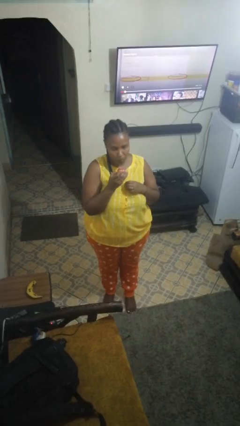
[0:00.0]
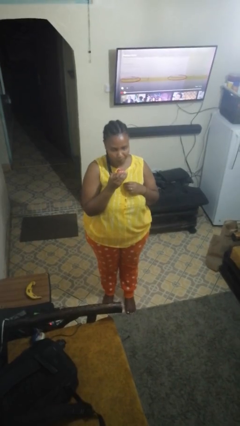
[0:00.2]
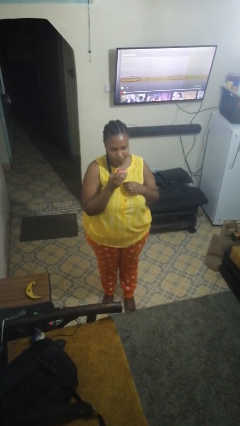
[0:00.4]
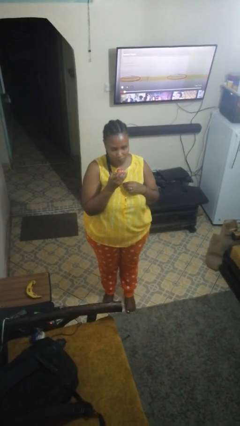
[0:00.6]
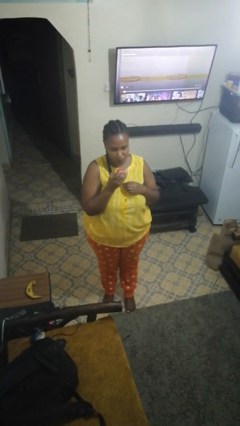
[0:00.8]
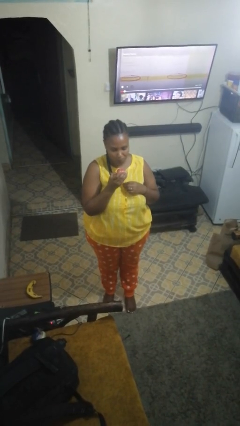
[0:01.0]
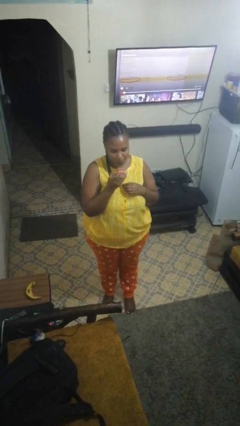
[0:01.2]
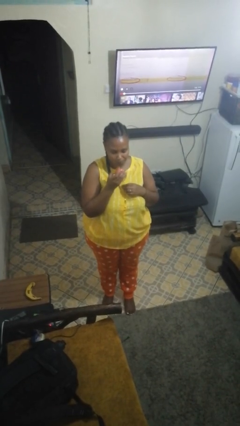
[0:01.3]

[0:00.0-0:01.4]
person eats apple

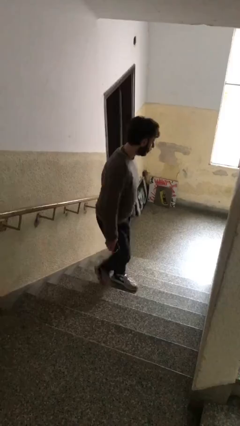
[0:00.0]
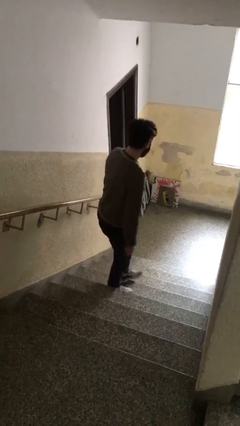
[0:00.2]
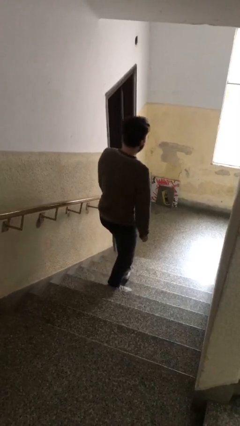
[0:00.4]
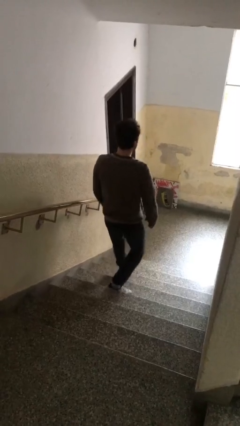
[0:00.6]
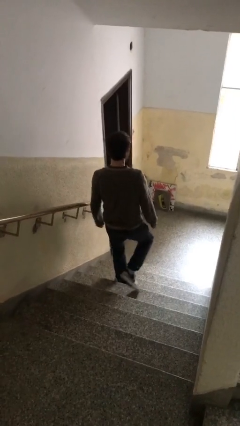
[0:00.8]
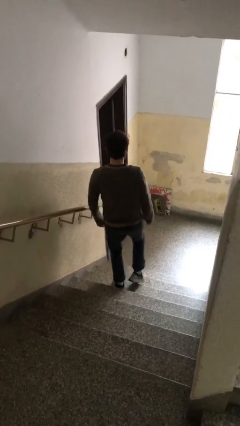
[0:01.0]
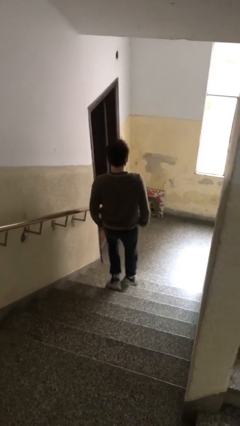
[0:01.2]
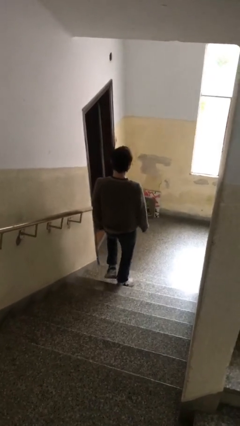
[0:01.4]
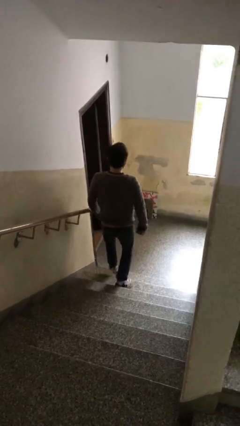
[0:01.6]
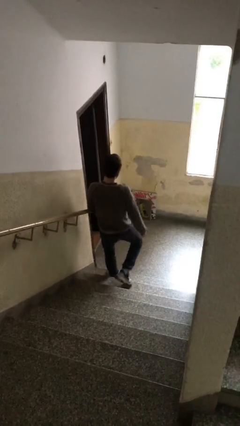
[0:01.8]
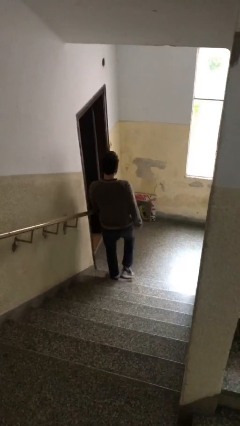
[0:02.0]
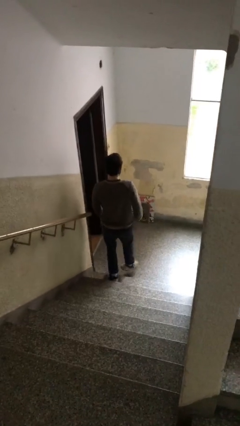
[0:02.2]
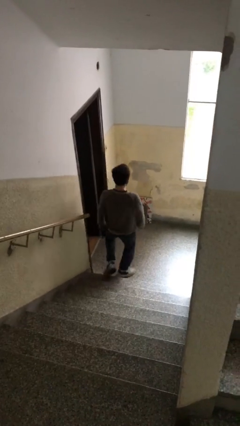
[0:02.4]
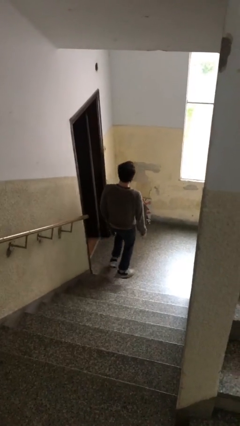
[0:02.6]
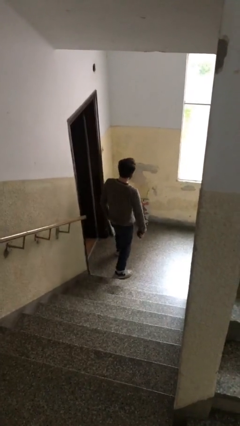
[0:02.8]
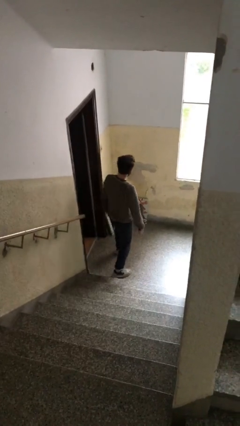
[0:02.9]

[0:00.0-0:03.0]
person climbs down stairs

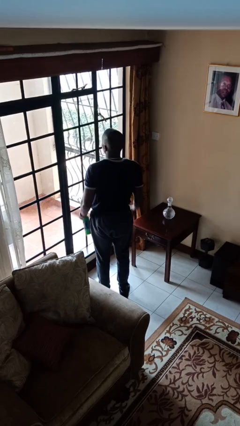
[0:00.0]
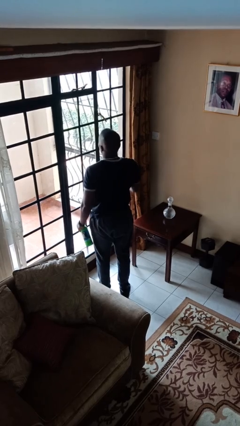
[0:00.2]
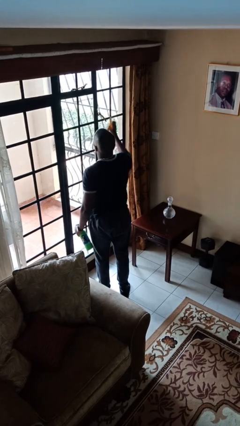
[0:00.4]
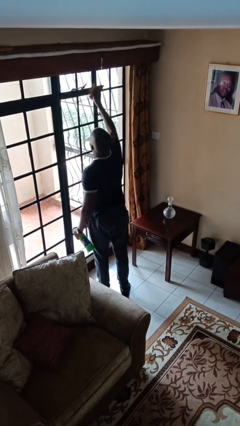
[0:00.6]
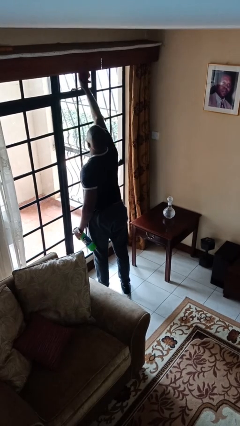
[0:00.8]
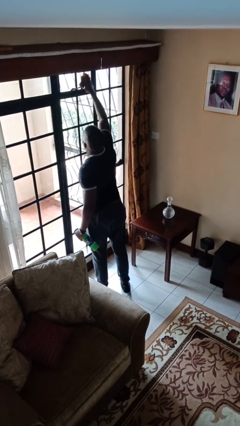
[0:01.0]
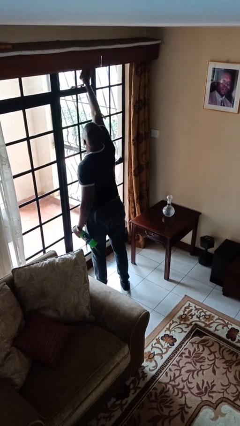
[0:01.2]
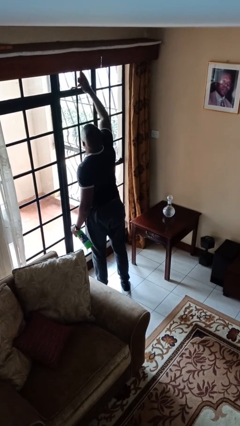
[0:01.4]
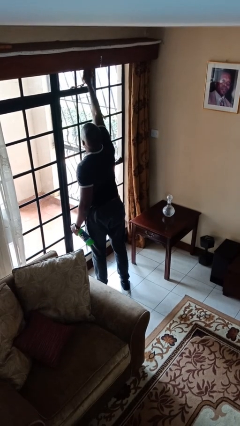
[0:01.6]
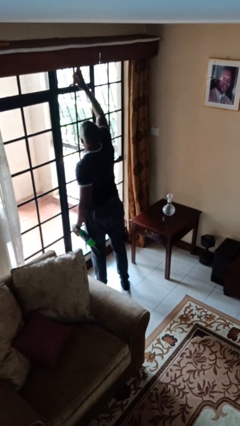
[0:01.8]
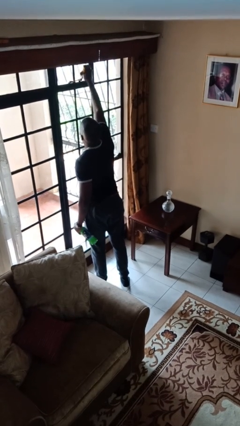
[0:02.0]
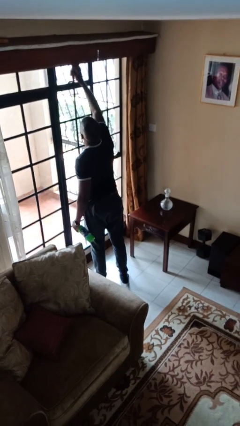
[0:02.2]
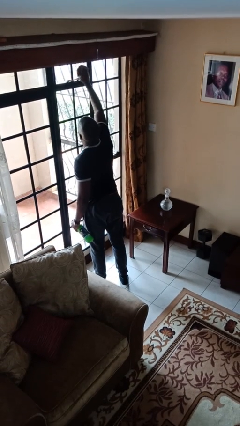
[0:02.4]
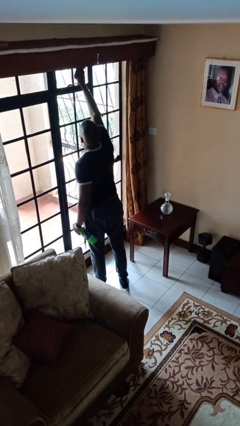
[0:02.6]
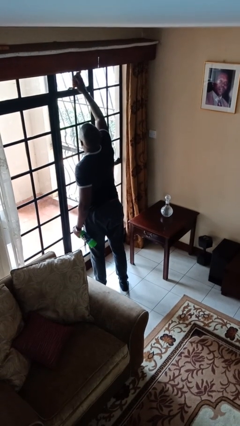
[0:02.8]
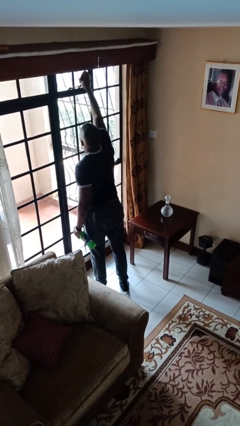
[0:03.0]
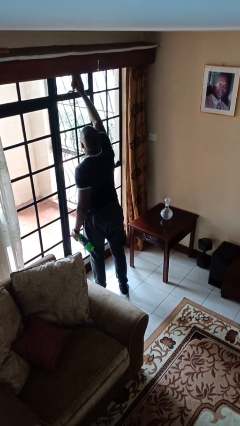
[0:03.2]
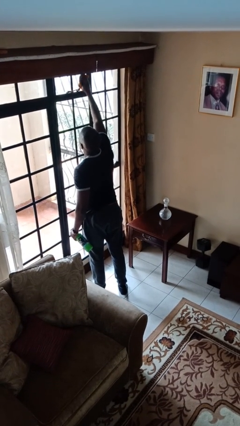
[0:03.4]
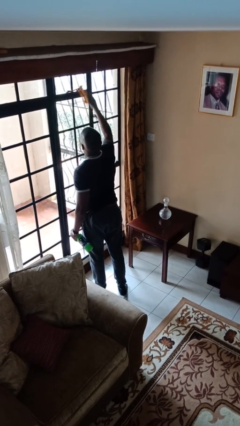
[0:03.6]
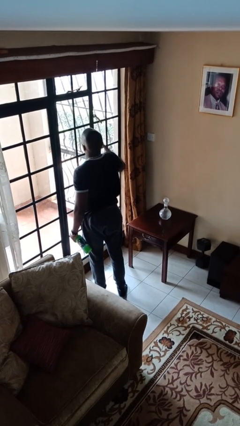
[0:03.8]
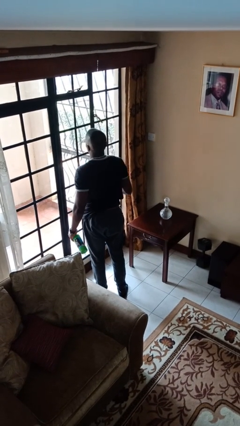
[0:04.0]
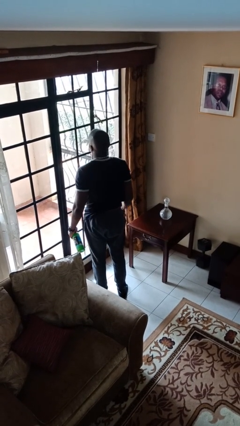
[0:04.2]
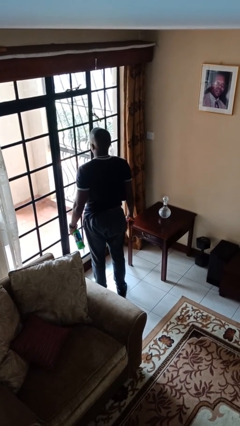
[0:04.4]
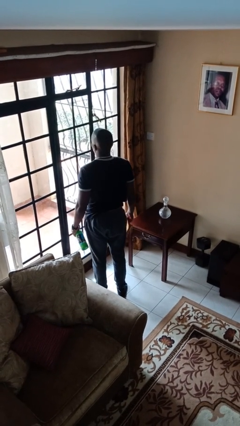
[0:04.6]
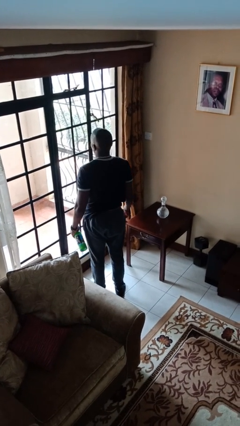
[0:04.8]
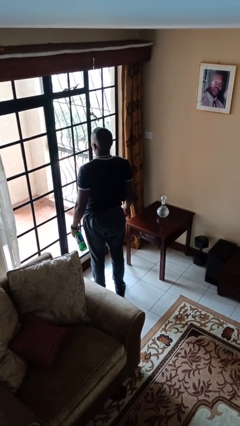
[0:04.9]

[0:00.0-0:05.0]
person washes window

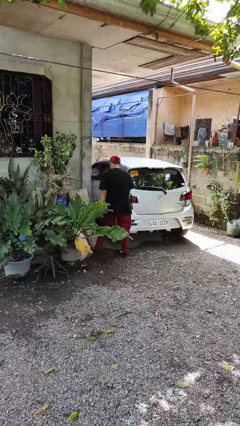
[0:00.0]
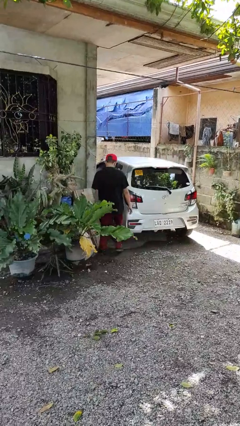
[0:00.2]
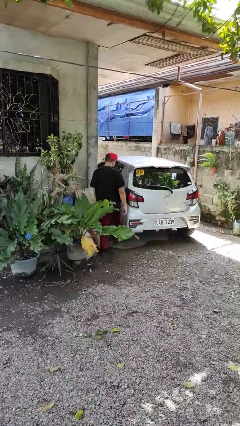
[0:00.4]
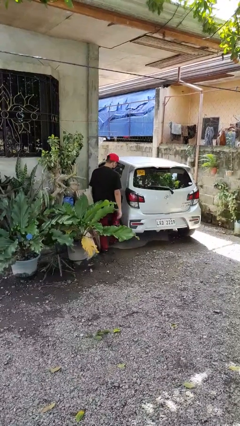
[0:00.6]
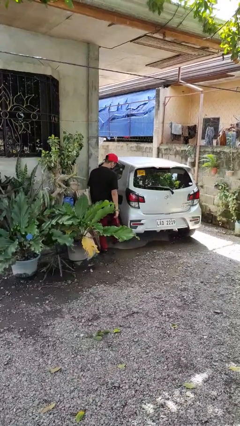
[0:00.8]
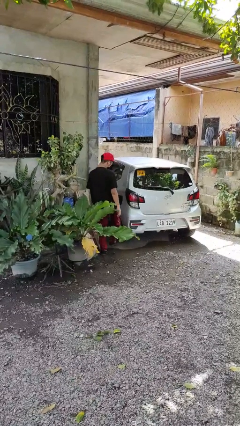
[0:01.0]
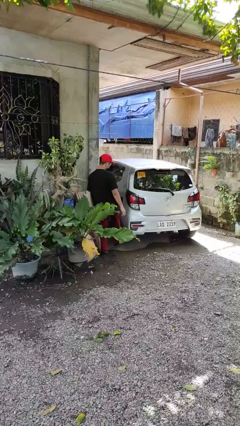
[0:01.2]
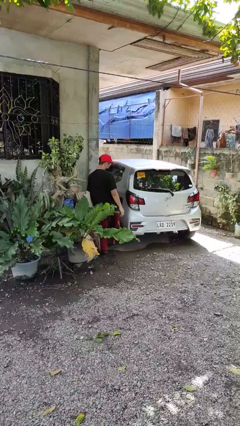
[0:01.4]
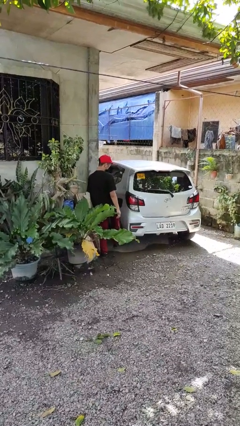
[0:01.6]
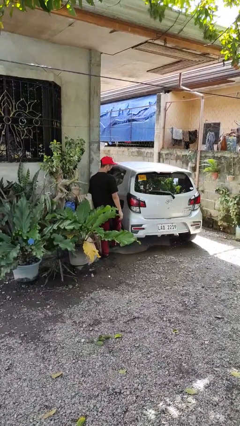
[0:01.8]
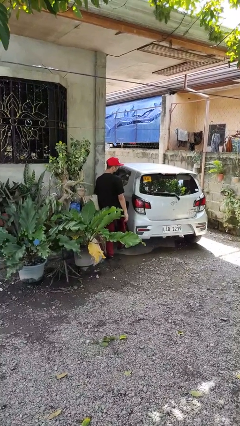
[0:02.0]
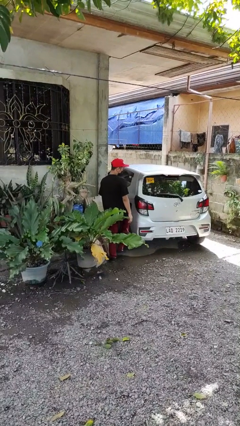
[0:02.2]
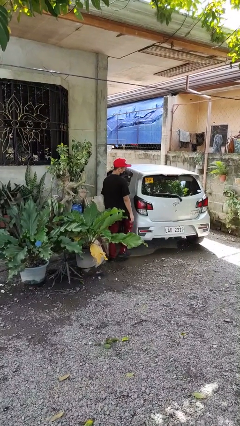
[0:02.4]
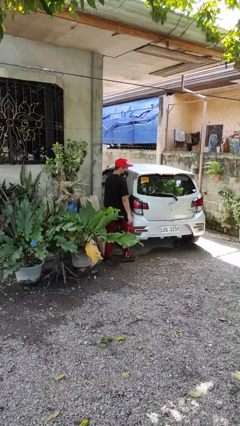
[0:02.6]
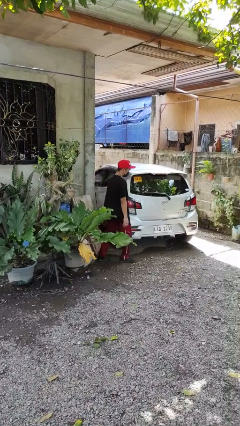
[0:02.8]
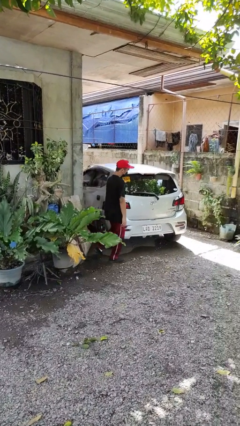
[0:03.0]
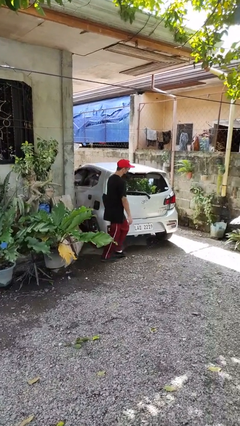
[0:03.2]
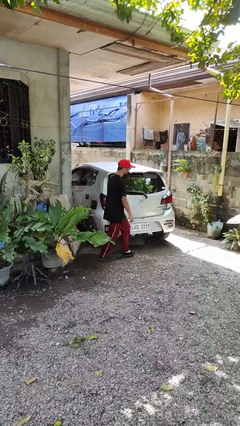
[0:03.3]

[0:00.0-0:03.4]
person kicks car tires

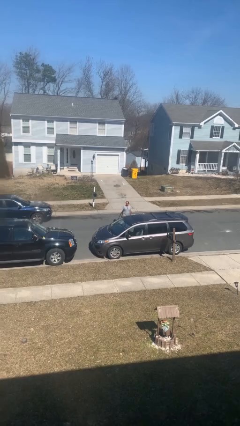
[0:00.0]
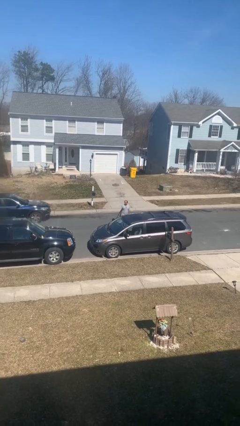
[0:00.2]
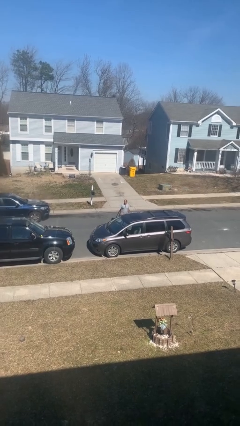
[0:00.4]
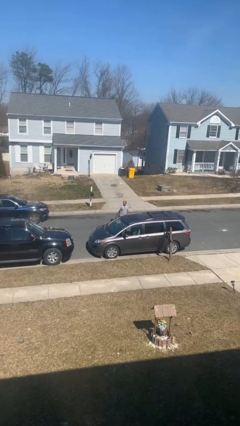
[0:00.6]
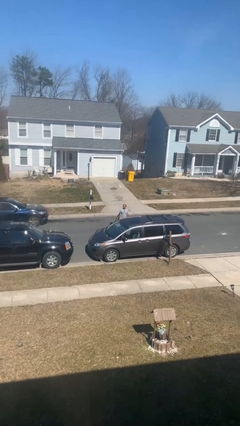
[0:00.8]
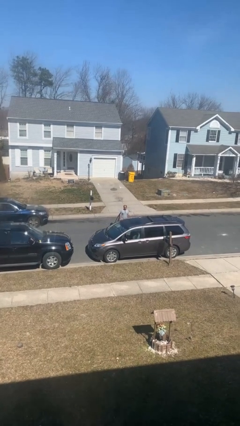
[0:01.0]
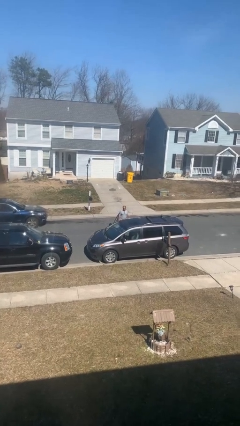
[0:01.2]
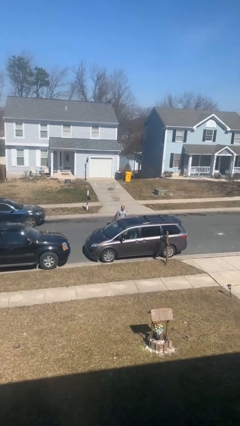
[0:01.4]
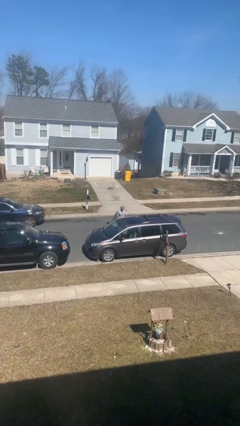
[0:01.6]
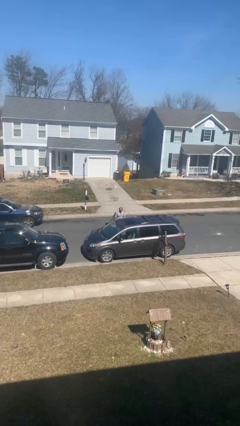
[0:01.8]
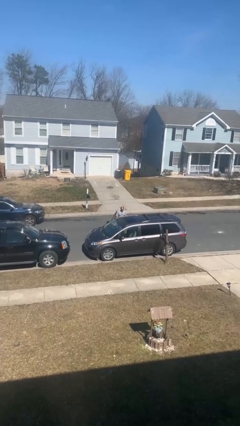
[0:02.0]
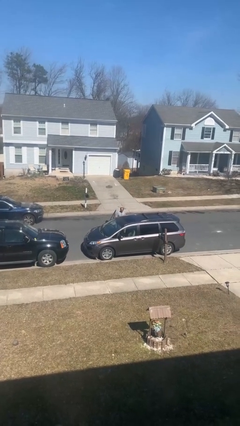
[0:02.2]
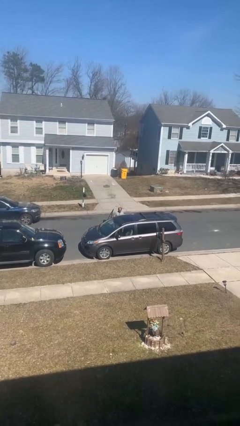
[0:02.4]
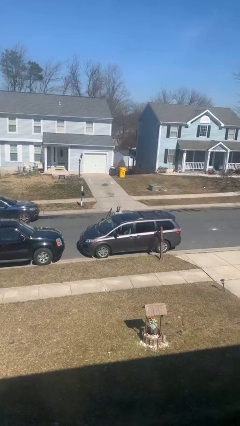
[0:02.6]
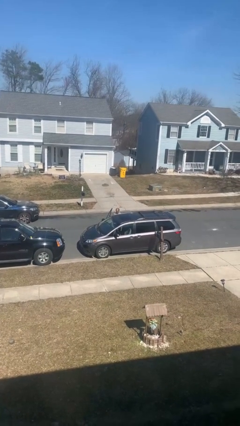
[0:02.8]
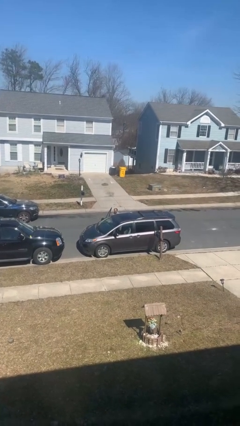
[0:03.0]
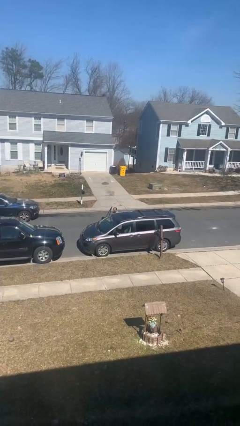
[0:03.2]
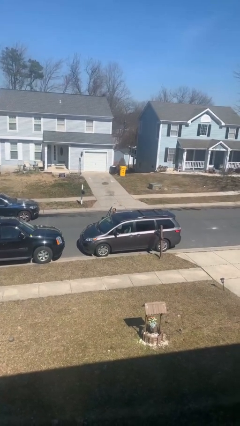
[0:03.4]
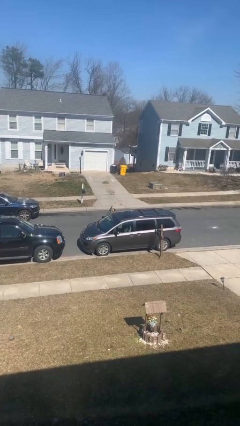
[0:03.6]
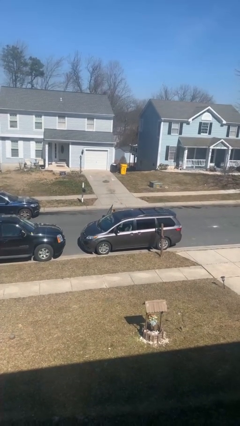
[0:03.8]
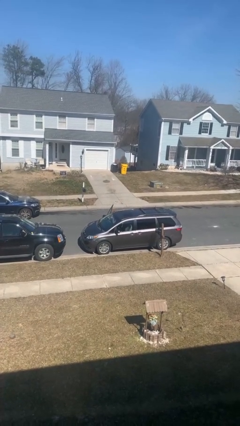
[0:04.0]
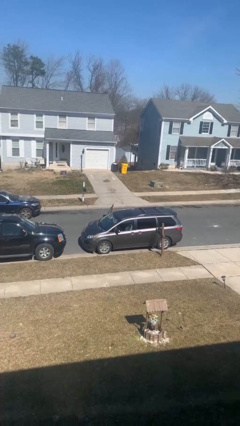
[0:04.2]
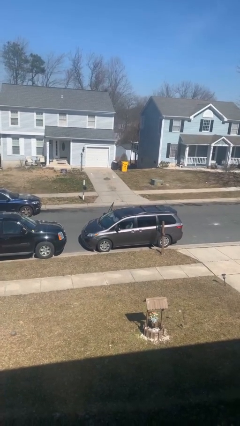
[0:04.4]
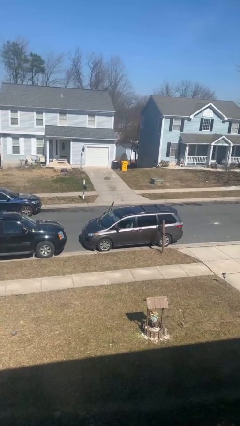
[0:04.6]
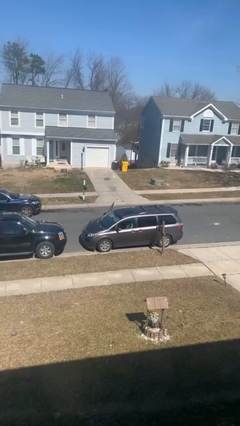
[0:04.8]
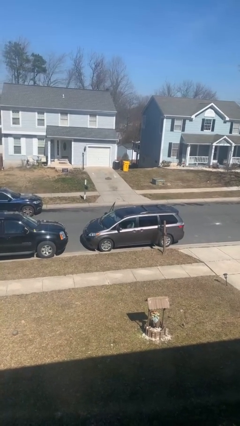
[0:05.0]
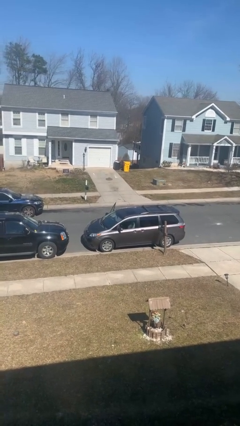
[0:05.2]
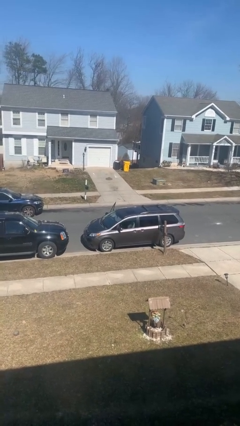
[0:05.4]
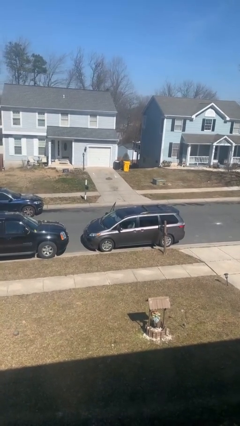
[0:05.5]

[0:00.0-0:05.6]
person enters car
